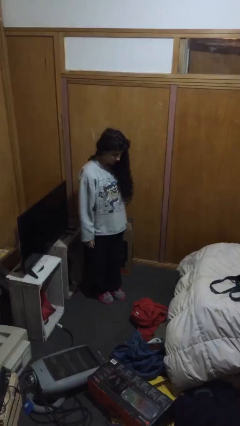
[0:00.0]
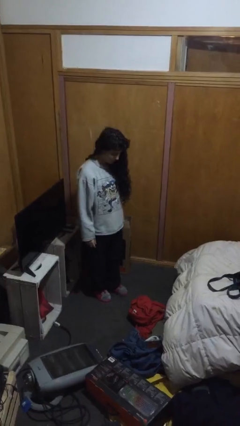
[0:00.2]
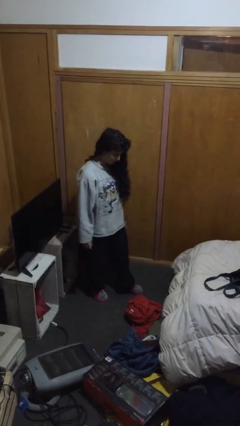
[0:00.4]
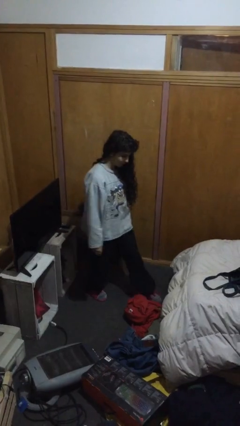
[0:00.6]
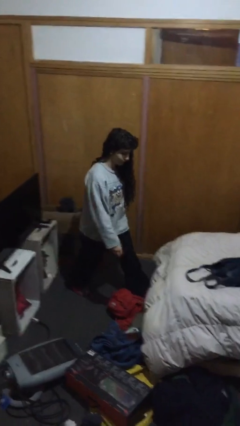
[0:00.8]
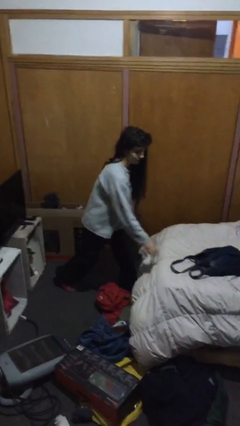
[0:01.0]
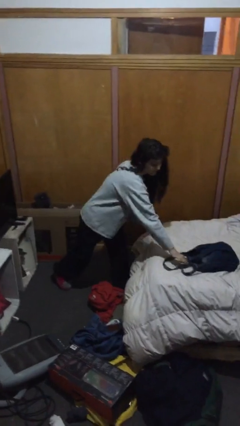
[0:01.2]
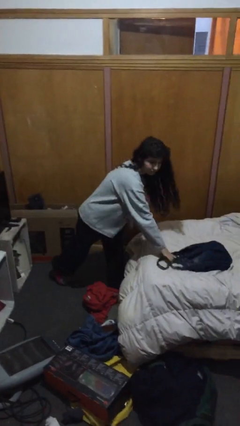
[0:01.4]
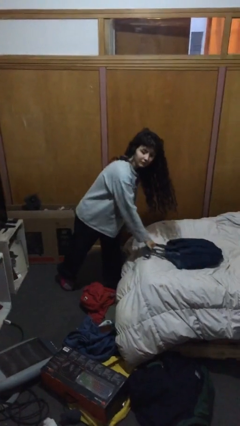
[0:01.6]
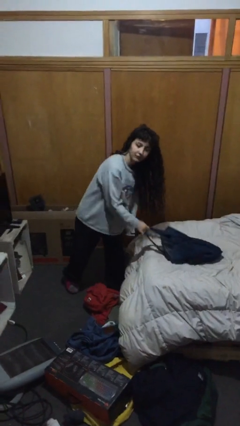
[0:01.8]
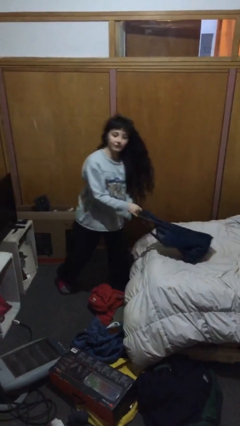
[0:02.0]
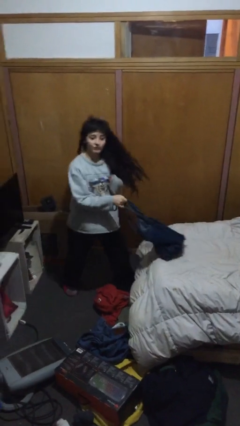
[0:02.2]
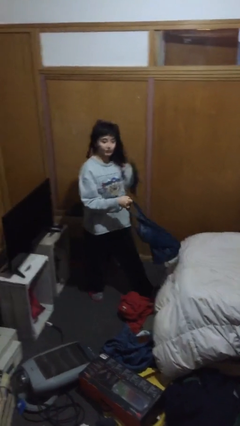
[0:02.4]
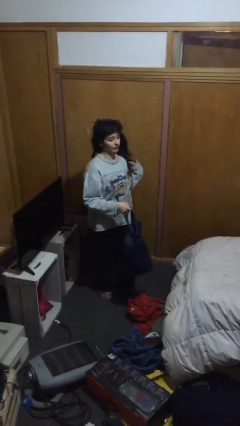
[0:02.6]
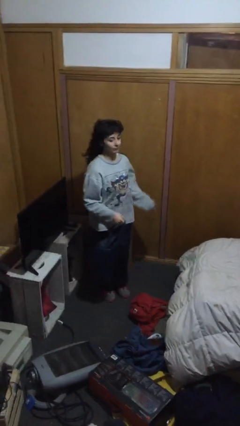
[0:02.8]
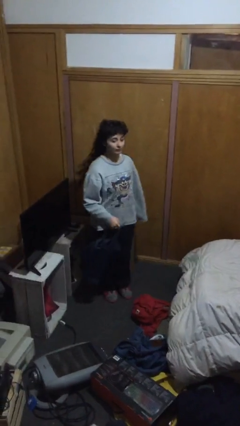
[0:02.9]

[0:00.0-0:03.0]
person picks up object from bed

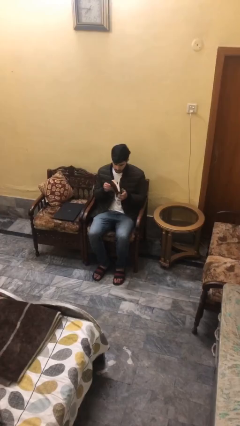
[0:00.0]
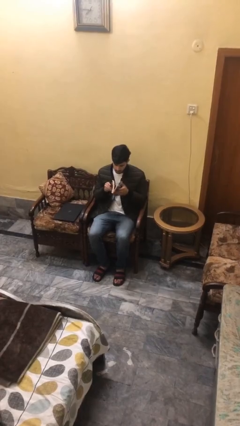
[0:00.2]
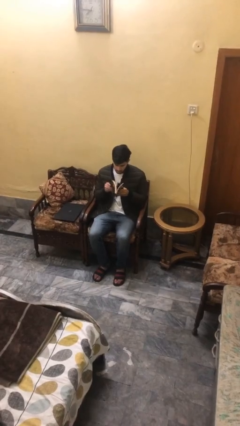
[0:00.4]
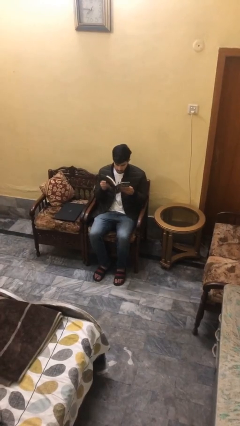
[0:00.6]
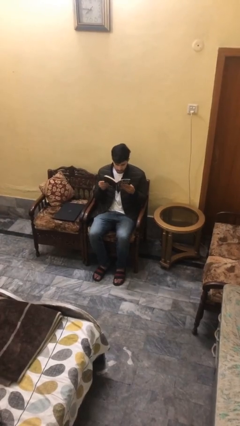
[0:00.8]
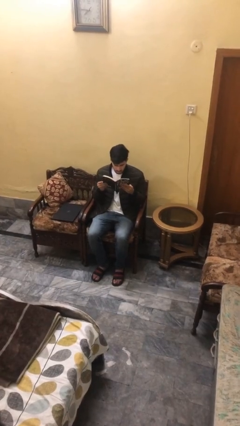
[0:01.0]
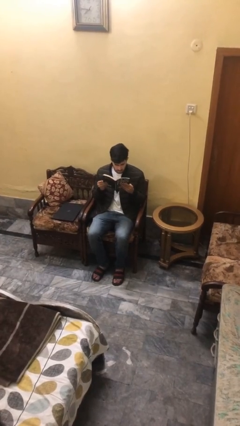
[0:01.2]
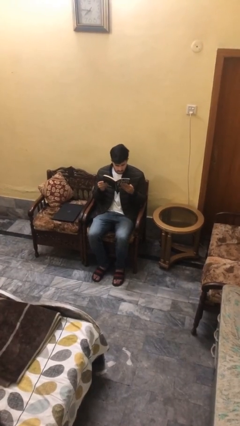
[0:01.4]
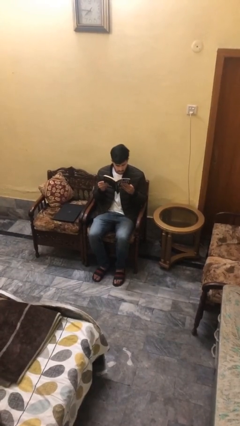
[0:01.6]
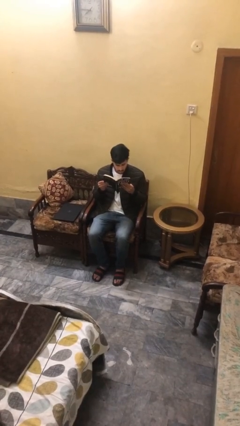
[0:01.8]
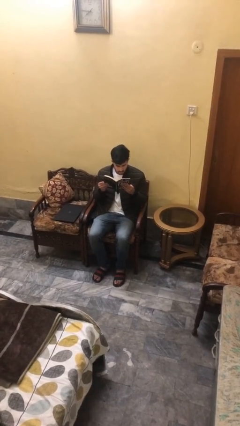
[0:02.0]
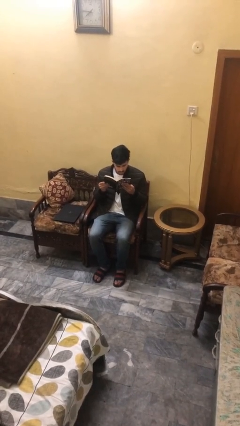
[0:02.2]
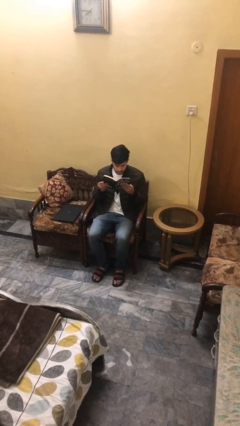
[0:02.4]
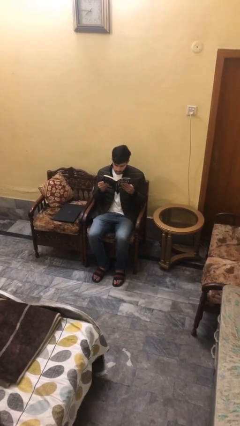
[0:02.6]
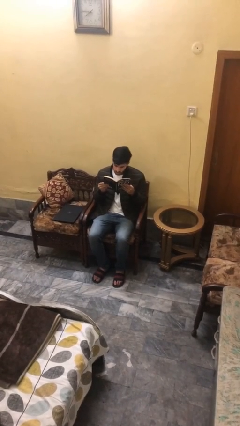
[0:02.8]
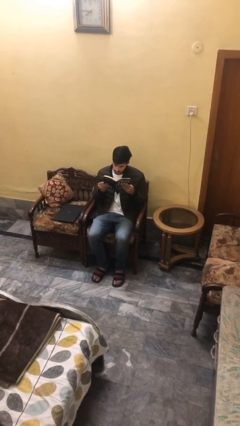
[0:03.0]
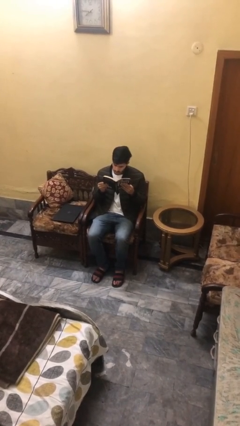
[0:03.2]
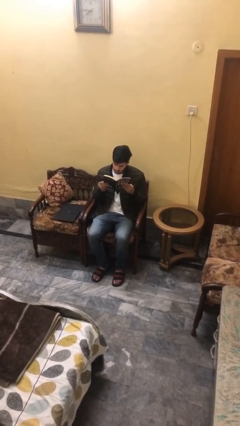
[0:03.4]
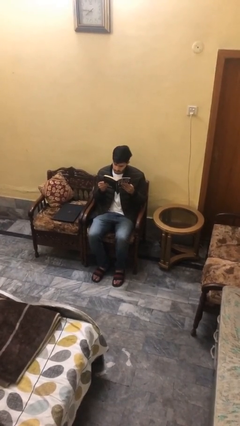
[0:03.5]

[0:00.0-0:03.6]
person reads document

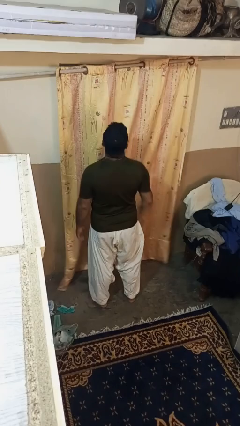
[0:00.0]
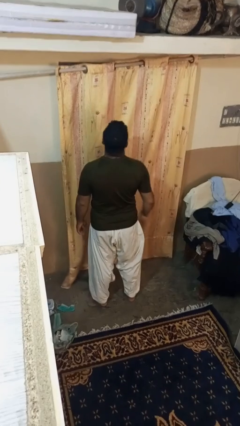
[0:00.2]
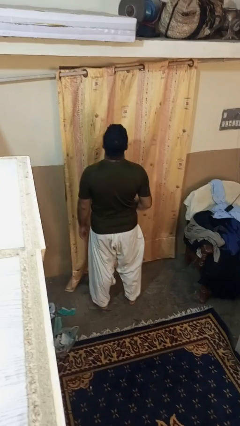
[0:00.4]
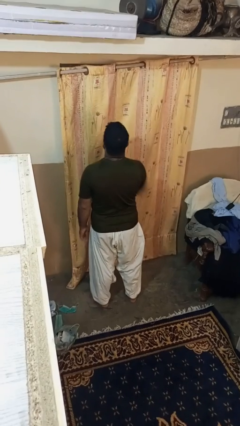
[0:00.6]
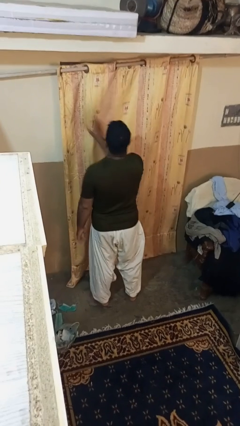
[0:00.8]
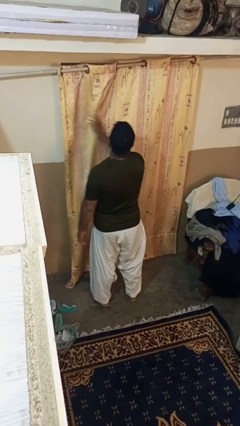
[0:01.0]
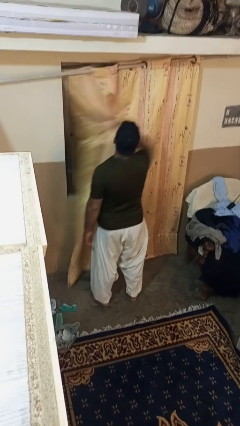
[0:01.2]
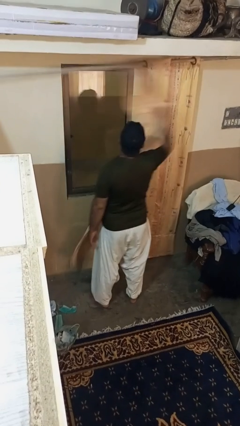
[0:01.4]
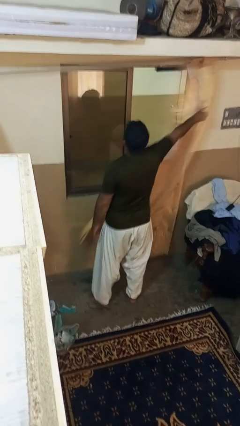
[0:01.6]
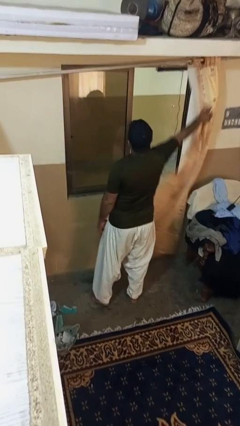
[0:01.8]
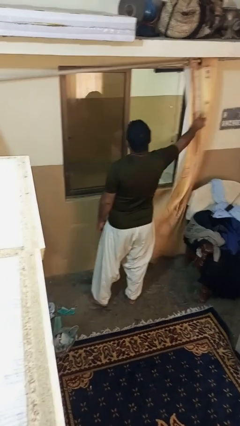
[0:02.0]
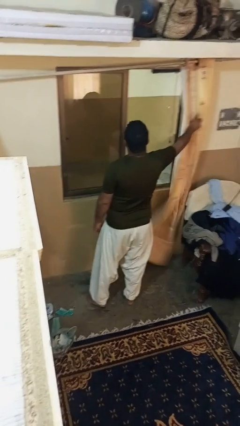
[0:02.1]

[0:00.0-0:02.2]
person opens curtains

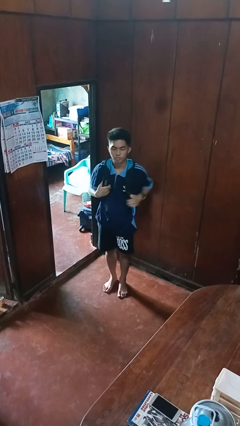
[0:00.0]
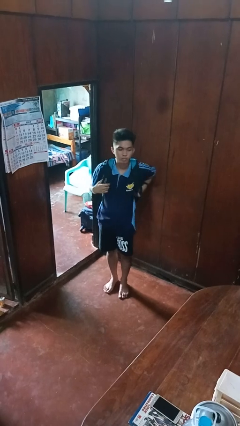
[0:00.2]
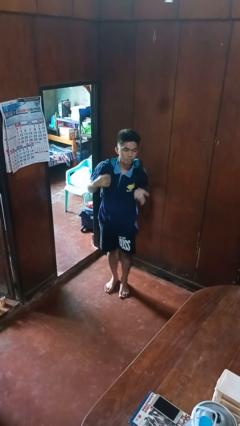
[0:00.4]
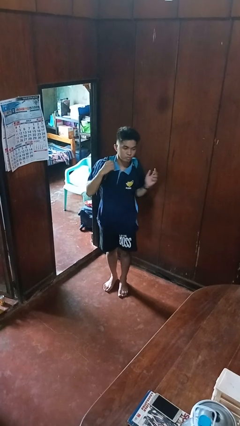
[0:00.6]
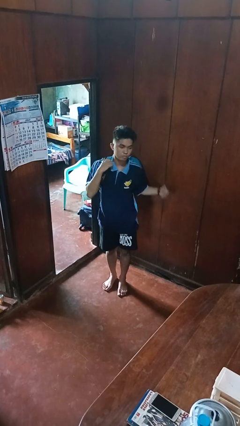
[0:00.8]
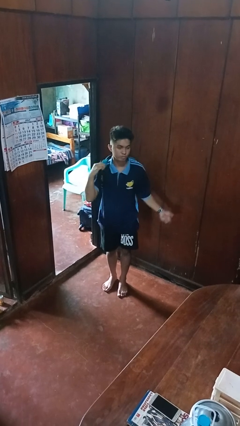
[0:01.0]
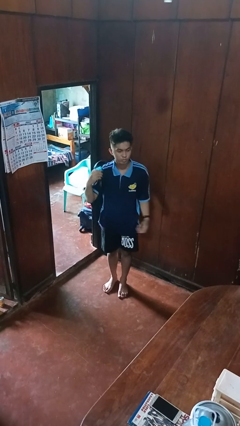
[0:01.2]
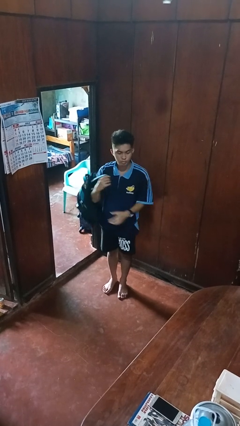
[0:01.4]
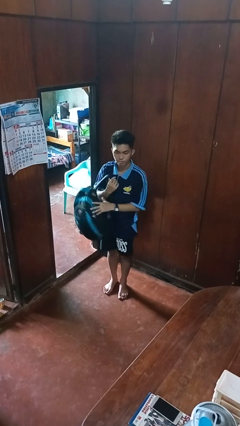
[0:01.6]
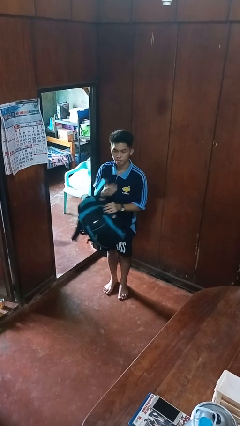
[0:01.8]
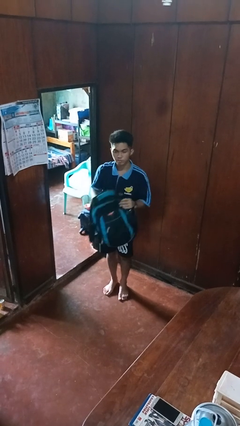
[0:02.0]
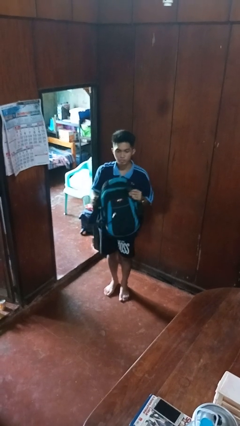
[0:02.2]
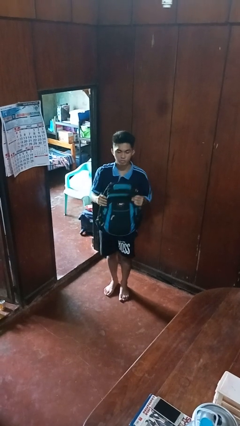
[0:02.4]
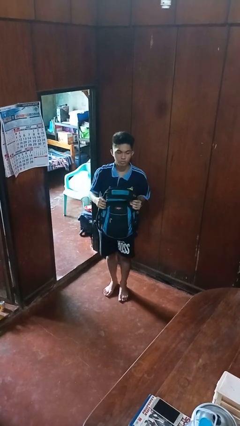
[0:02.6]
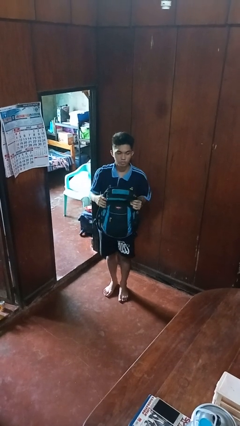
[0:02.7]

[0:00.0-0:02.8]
person takes off backpack

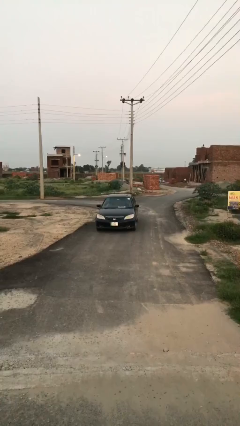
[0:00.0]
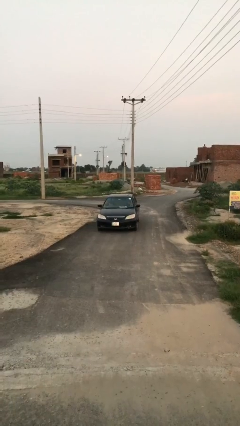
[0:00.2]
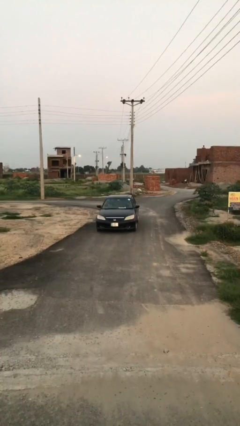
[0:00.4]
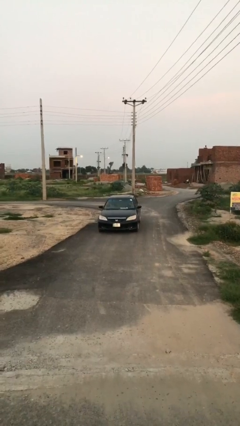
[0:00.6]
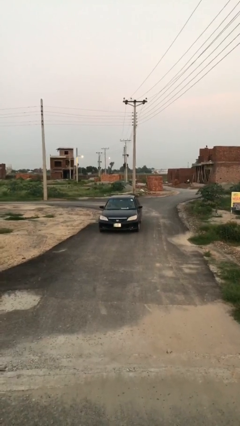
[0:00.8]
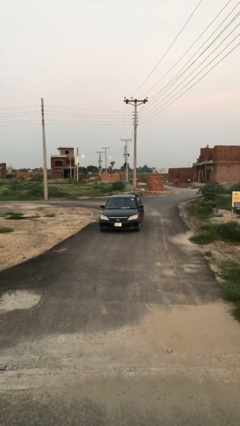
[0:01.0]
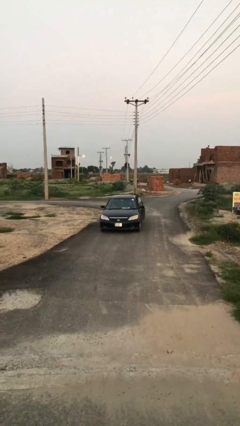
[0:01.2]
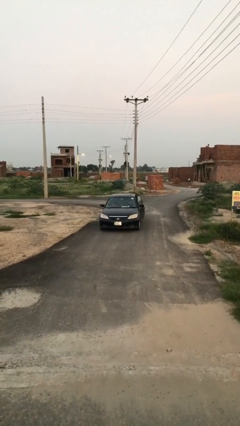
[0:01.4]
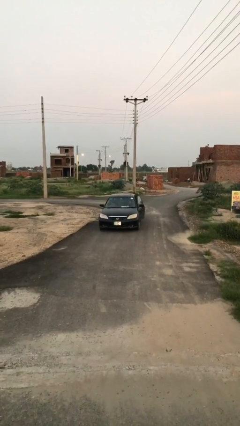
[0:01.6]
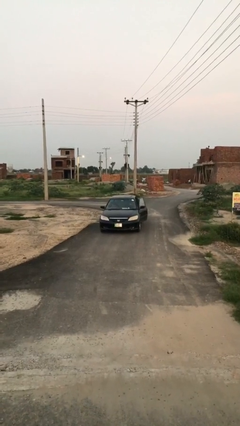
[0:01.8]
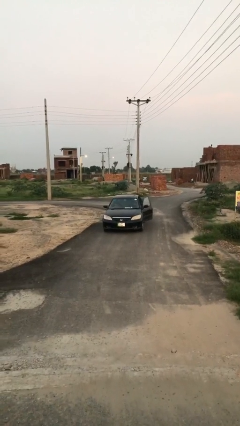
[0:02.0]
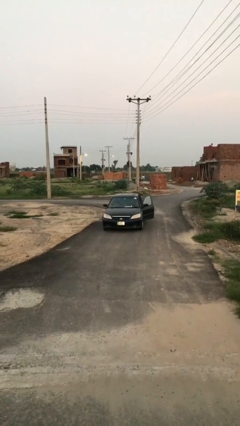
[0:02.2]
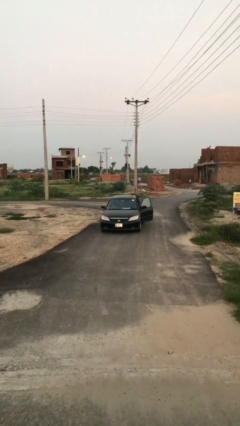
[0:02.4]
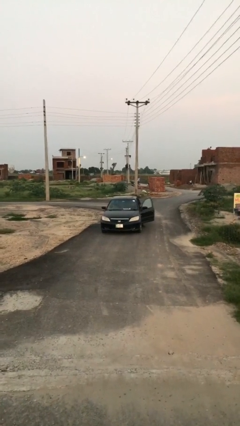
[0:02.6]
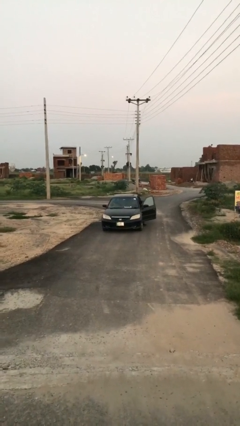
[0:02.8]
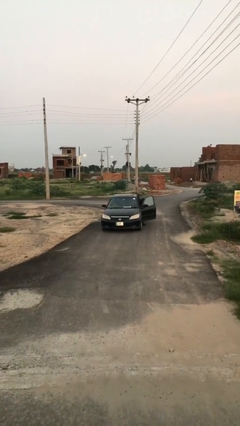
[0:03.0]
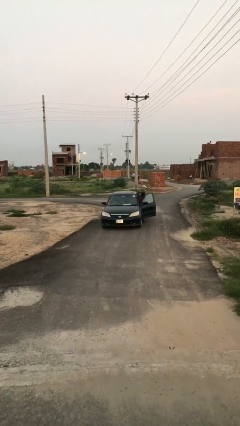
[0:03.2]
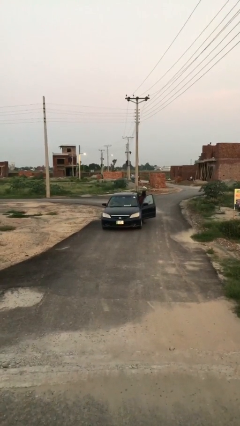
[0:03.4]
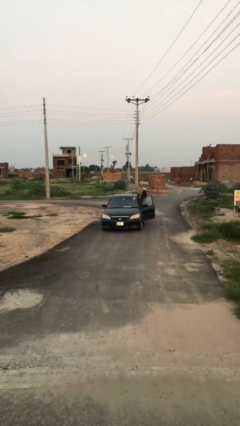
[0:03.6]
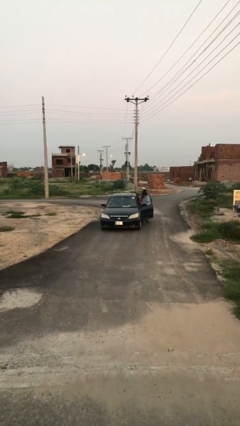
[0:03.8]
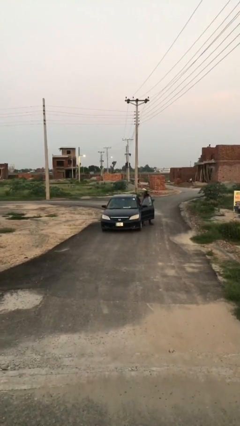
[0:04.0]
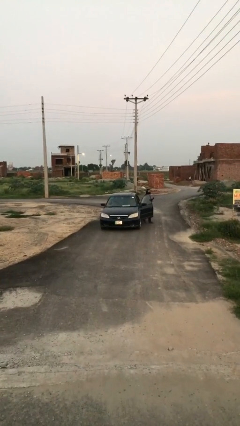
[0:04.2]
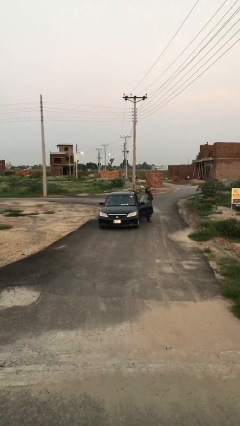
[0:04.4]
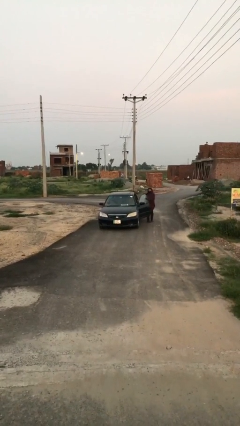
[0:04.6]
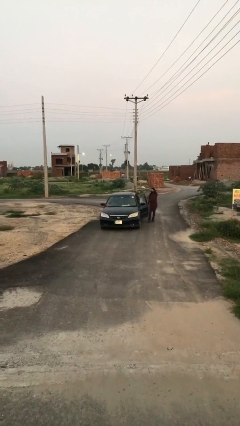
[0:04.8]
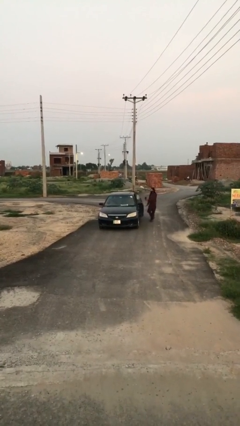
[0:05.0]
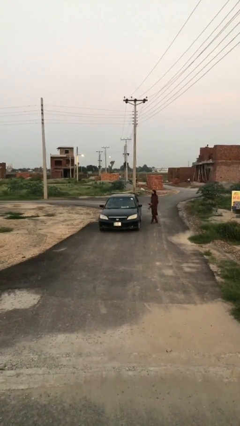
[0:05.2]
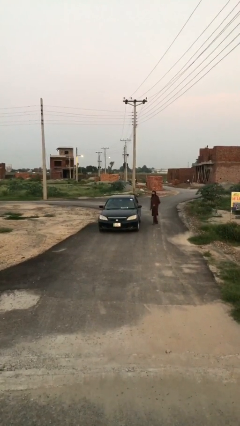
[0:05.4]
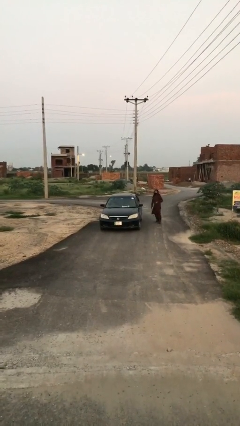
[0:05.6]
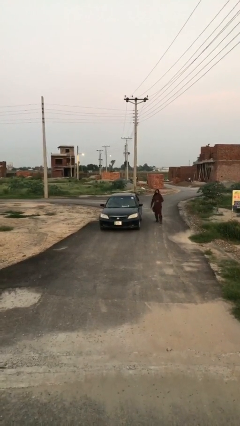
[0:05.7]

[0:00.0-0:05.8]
car drops off person
